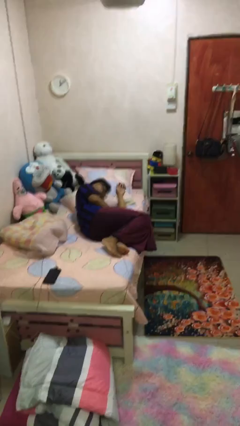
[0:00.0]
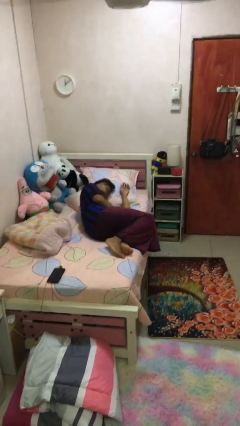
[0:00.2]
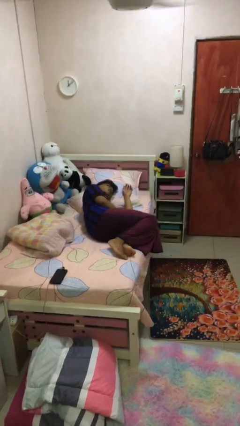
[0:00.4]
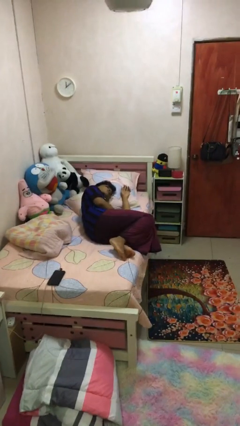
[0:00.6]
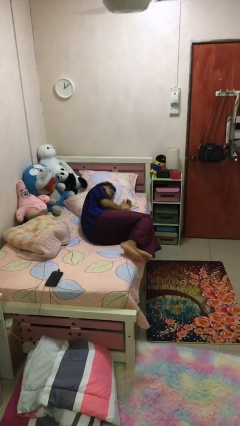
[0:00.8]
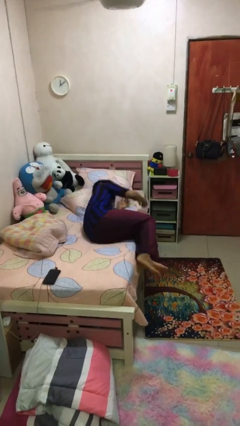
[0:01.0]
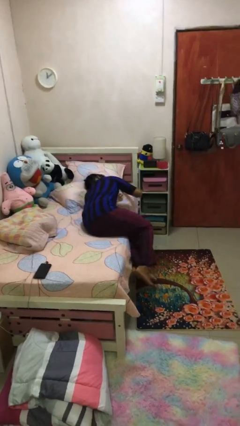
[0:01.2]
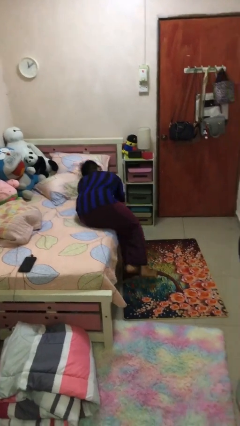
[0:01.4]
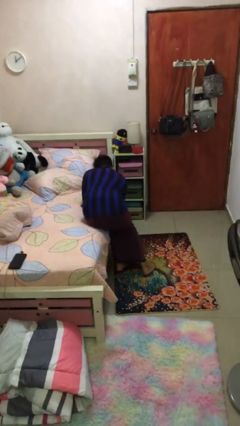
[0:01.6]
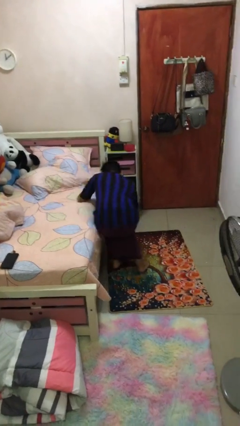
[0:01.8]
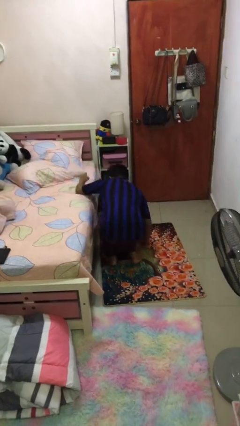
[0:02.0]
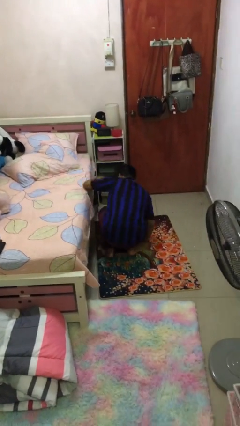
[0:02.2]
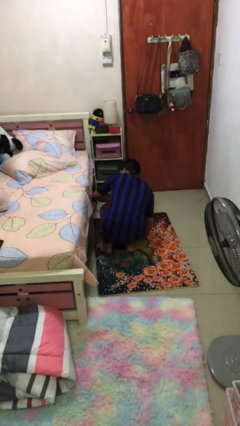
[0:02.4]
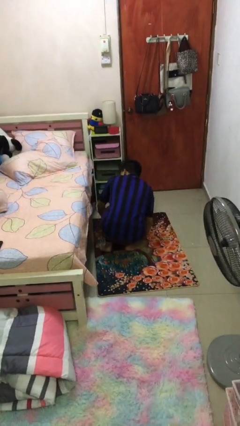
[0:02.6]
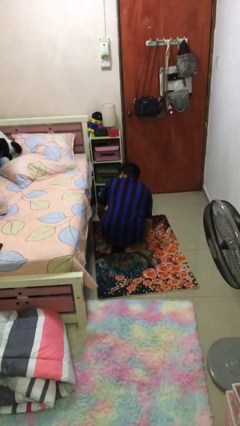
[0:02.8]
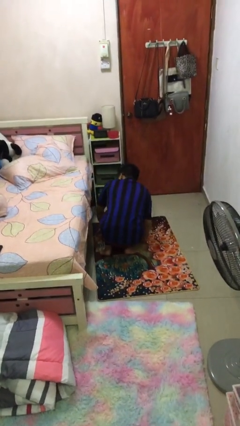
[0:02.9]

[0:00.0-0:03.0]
person falls from bed

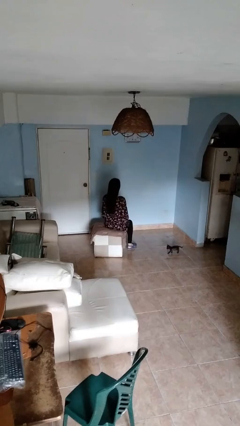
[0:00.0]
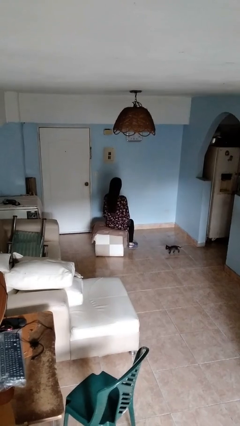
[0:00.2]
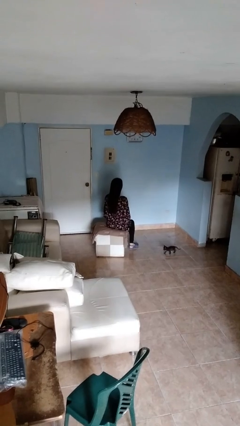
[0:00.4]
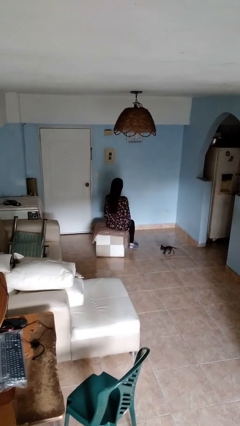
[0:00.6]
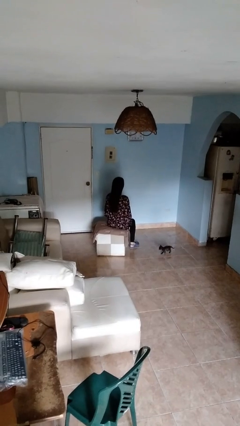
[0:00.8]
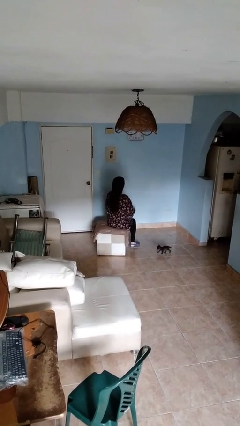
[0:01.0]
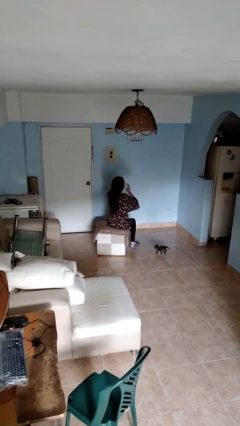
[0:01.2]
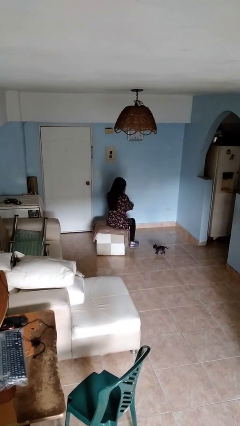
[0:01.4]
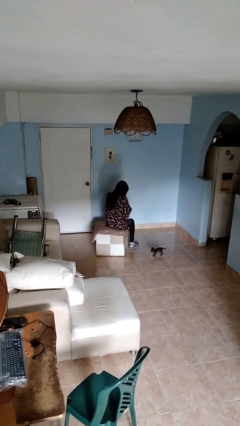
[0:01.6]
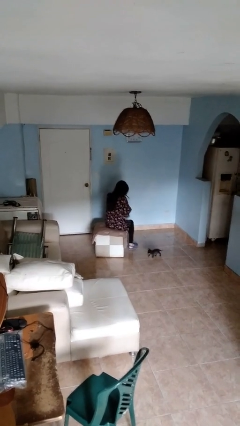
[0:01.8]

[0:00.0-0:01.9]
person sneezes into hand

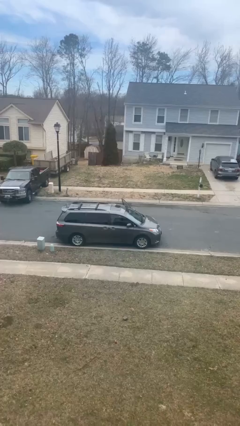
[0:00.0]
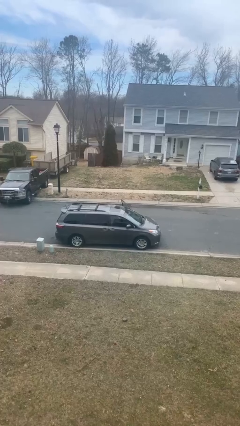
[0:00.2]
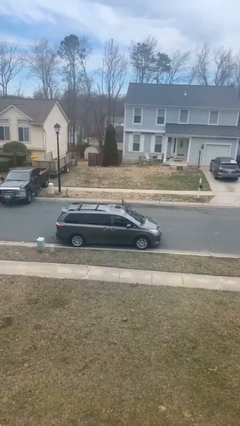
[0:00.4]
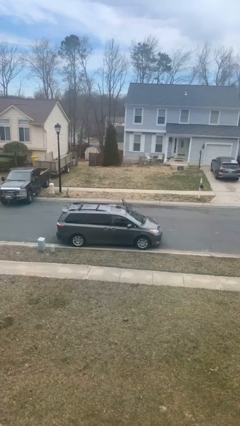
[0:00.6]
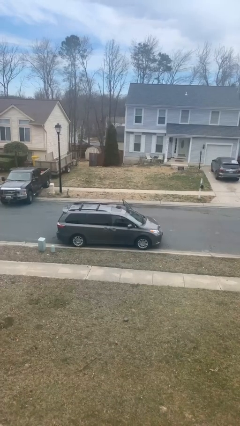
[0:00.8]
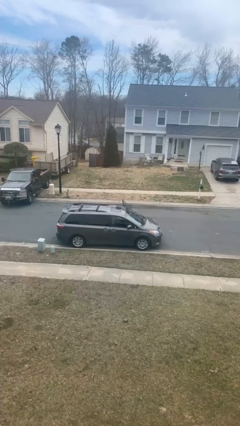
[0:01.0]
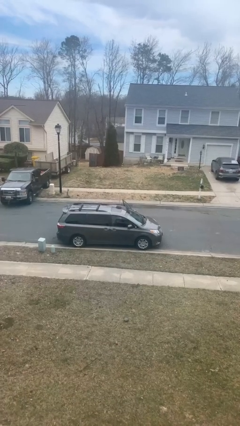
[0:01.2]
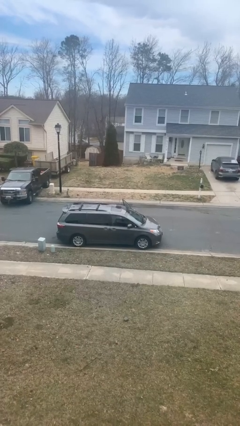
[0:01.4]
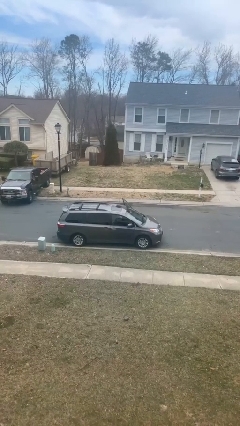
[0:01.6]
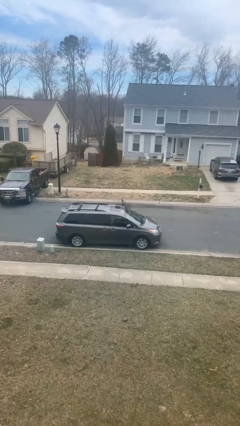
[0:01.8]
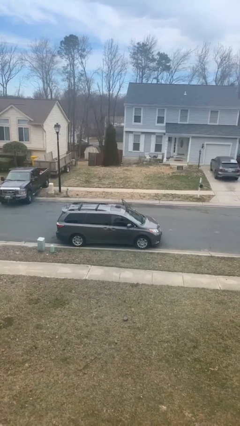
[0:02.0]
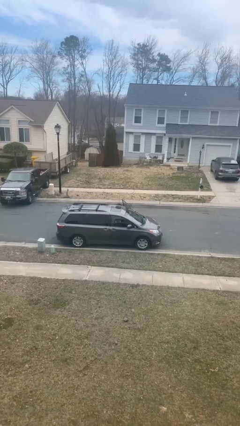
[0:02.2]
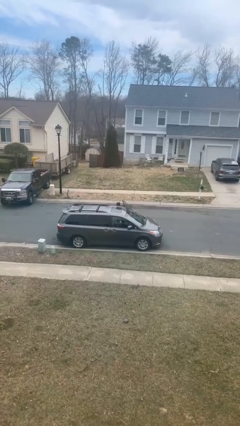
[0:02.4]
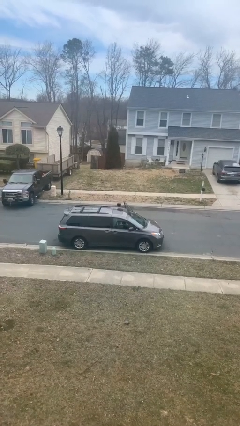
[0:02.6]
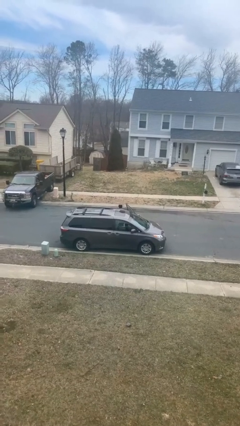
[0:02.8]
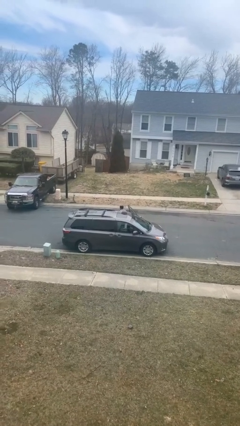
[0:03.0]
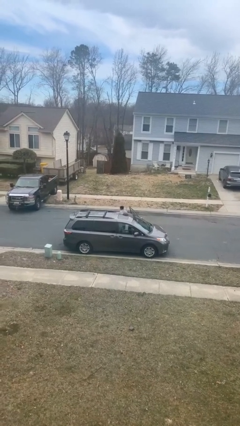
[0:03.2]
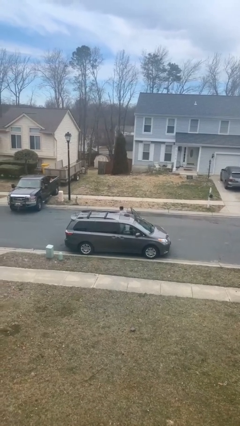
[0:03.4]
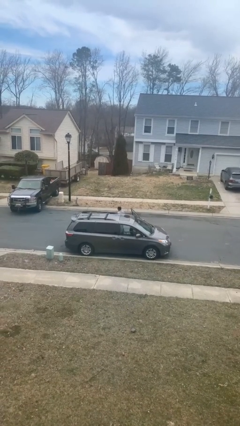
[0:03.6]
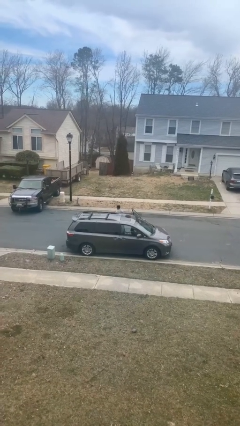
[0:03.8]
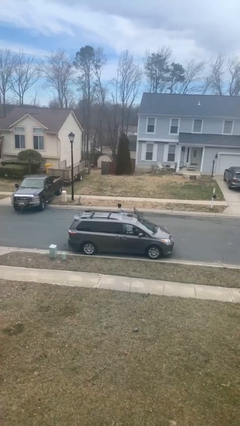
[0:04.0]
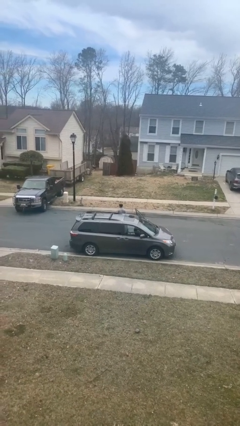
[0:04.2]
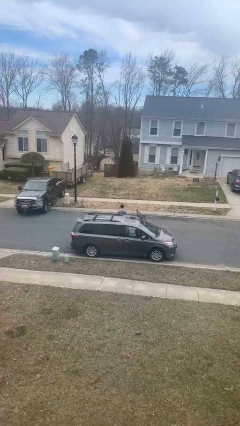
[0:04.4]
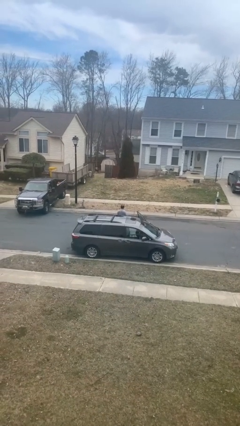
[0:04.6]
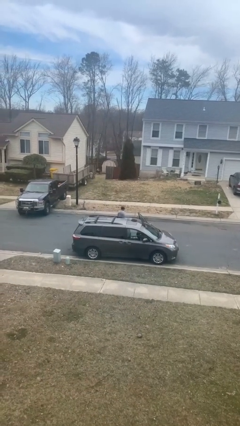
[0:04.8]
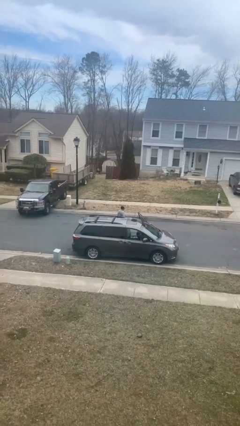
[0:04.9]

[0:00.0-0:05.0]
person exits car

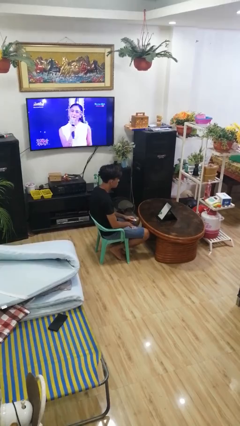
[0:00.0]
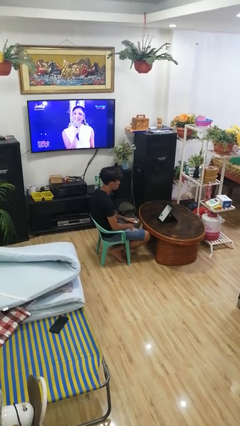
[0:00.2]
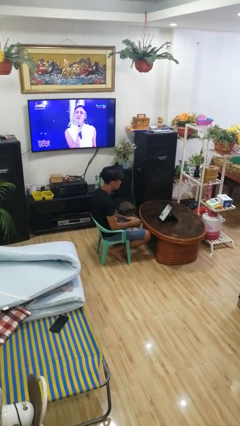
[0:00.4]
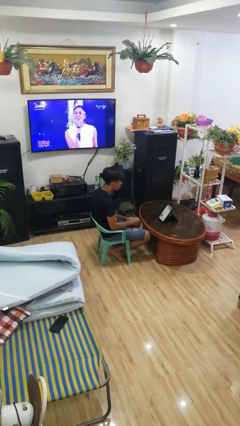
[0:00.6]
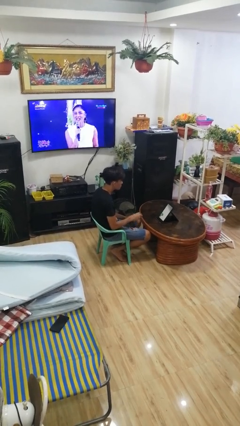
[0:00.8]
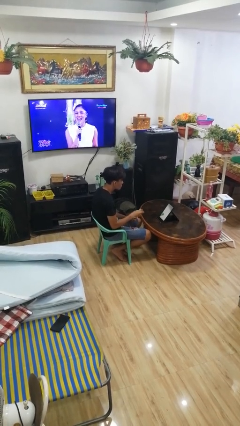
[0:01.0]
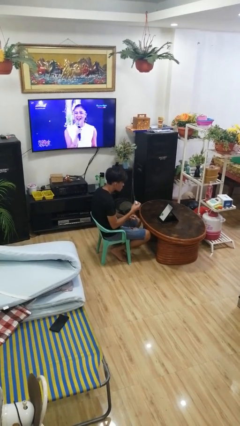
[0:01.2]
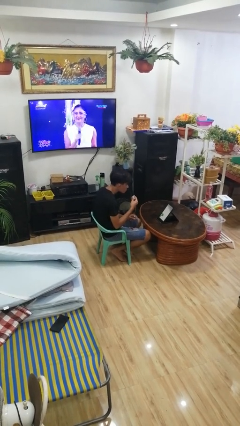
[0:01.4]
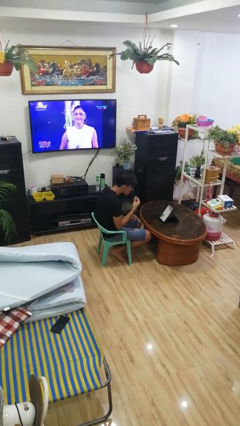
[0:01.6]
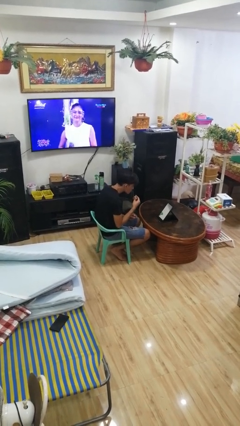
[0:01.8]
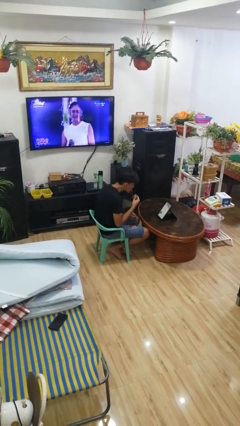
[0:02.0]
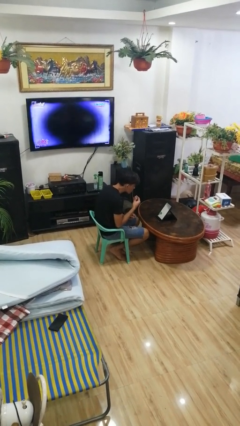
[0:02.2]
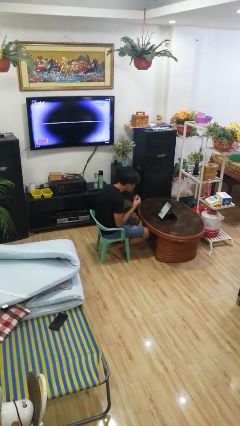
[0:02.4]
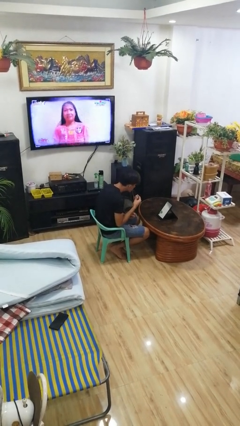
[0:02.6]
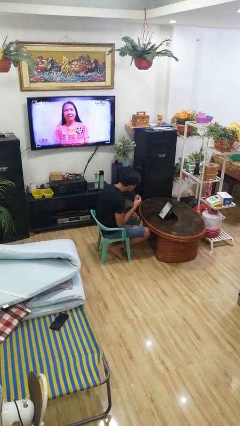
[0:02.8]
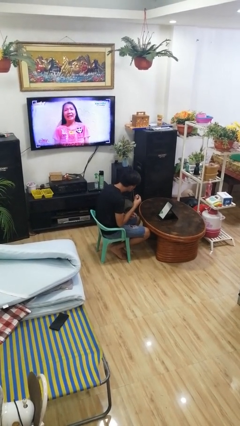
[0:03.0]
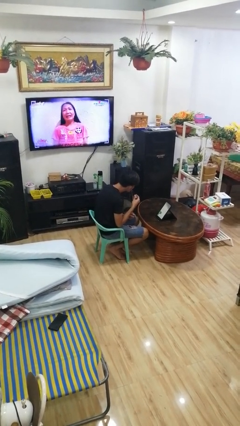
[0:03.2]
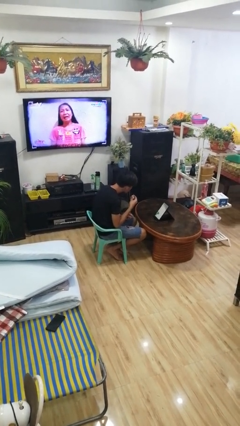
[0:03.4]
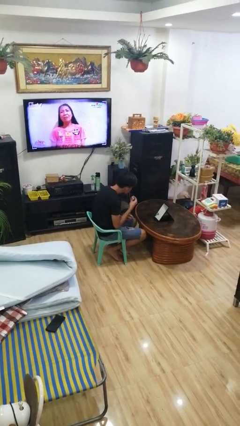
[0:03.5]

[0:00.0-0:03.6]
person applies lip makeup

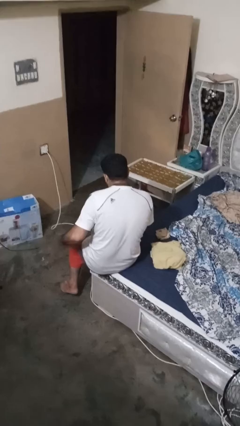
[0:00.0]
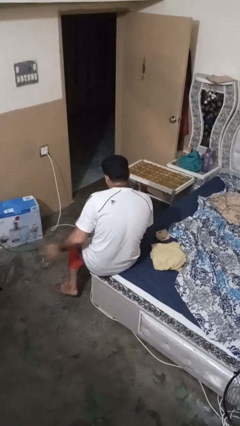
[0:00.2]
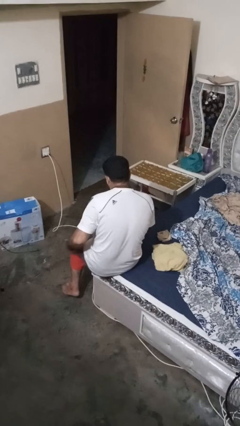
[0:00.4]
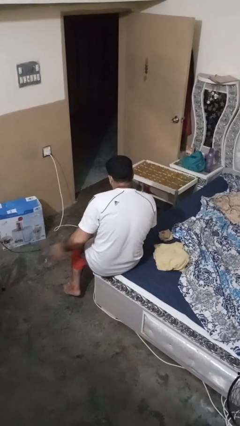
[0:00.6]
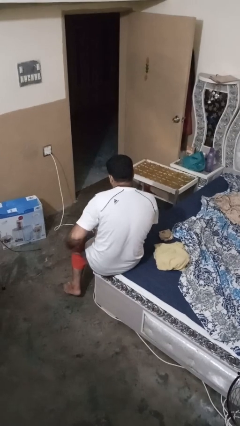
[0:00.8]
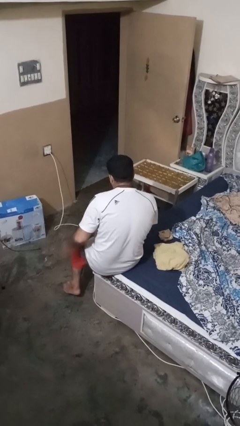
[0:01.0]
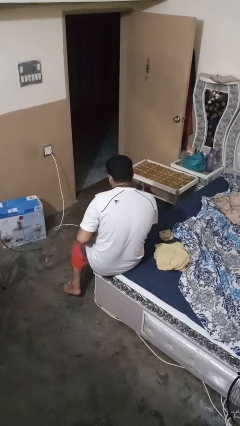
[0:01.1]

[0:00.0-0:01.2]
person slaps hands on thighs

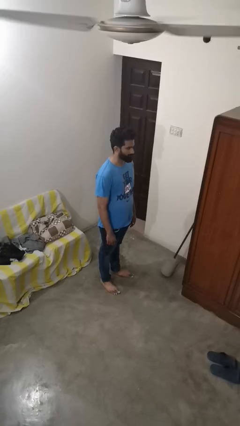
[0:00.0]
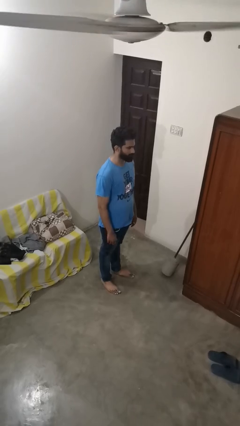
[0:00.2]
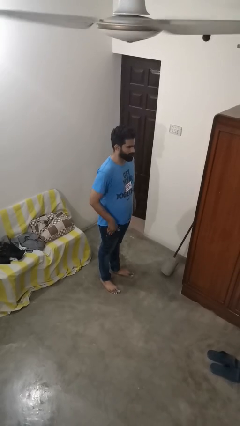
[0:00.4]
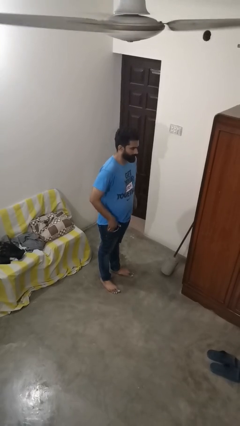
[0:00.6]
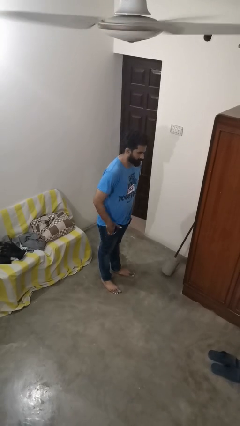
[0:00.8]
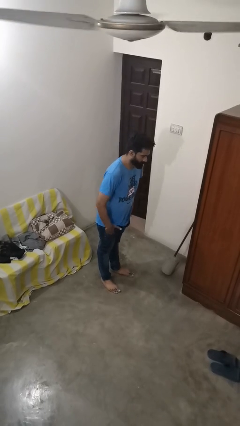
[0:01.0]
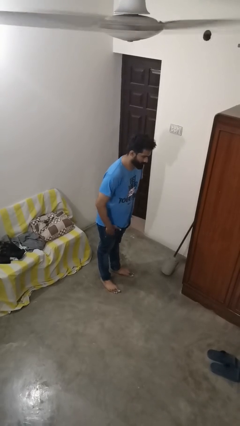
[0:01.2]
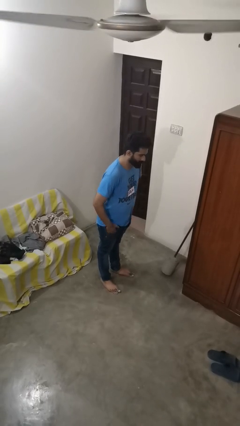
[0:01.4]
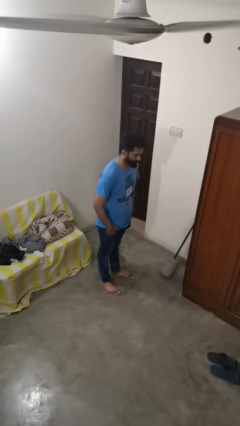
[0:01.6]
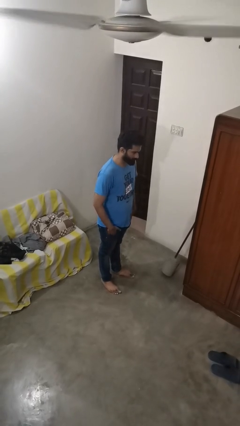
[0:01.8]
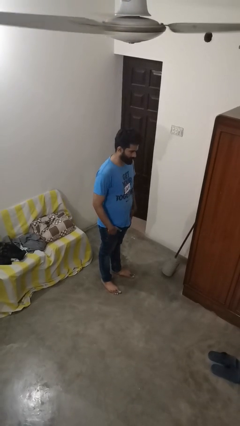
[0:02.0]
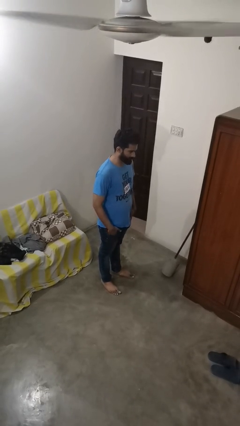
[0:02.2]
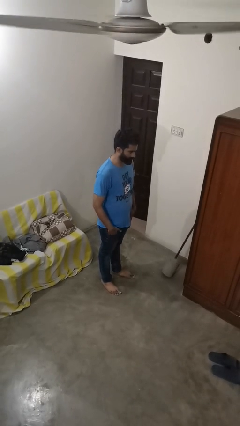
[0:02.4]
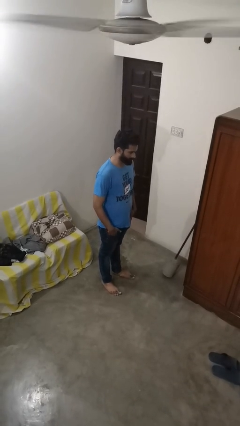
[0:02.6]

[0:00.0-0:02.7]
person puts hands in back pockets

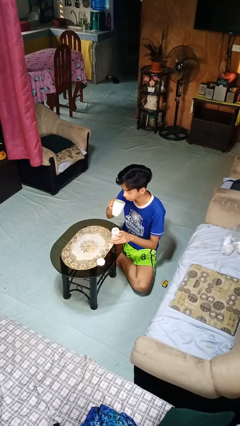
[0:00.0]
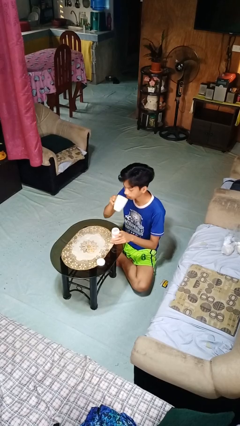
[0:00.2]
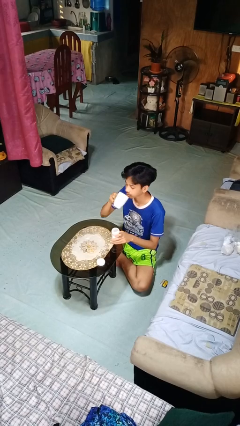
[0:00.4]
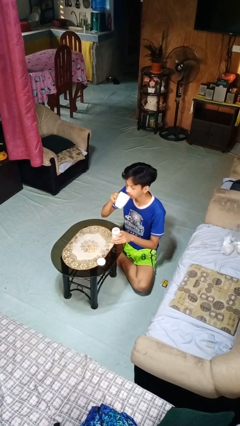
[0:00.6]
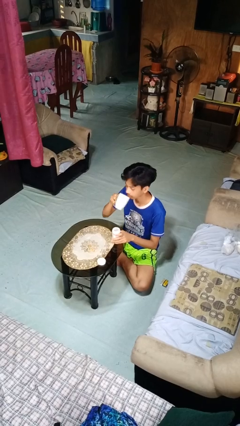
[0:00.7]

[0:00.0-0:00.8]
person drinks from cup
